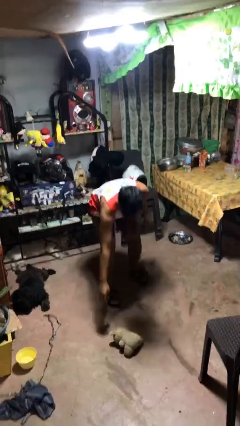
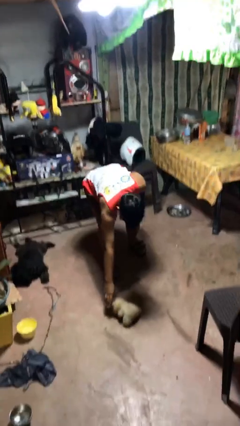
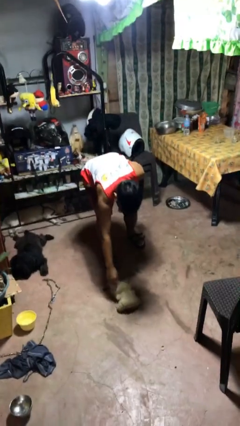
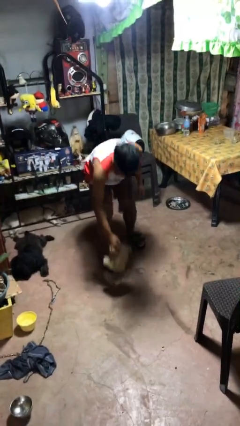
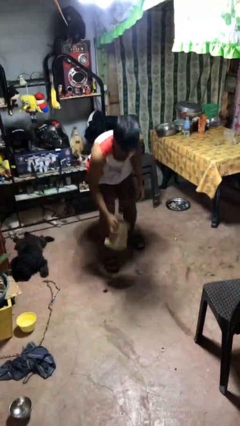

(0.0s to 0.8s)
person picks up object from floor

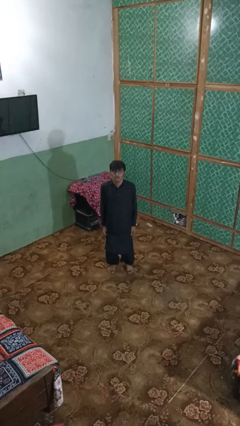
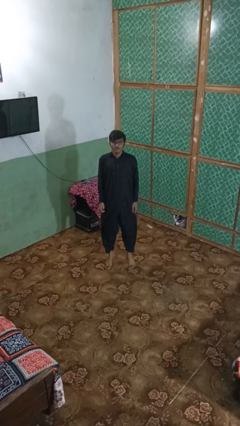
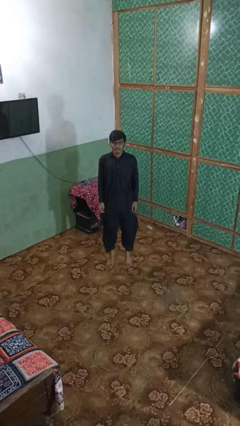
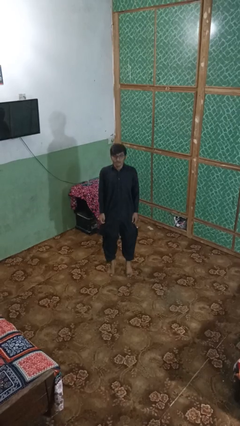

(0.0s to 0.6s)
person jumps

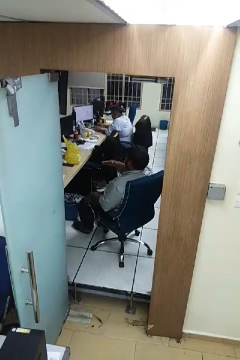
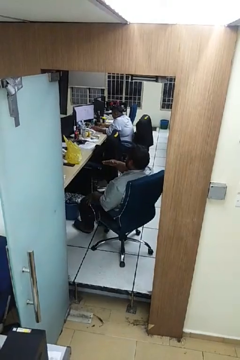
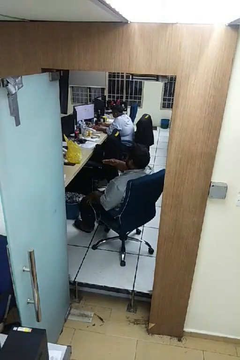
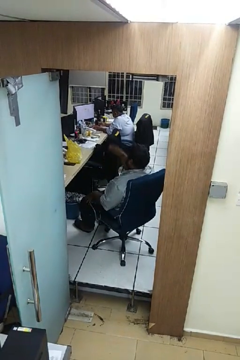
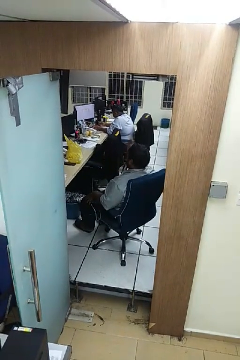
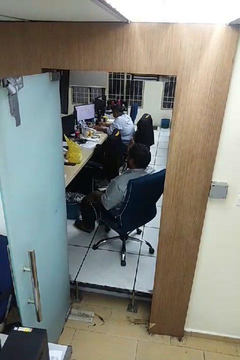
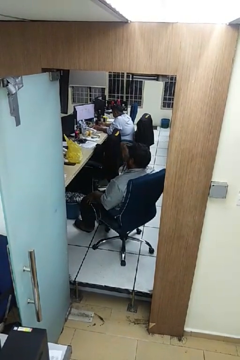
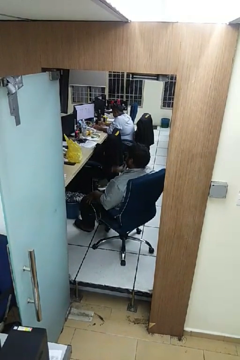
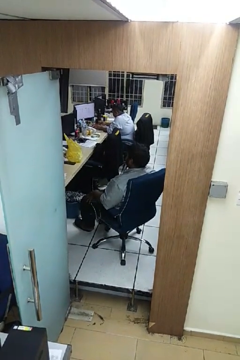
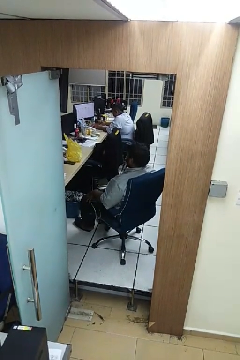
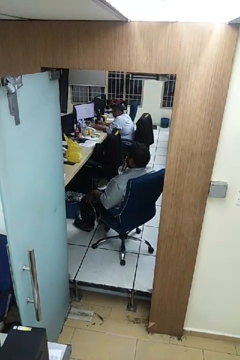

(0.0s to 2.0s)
person gestures swipe right

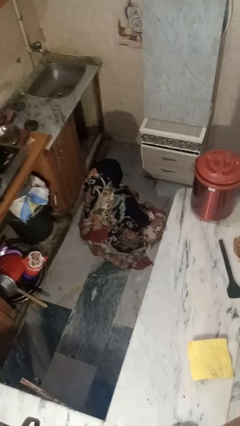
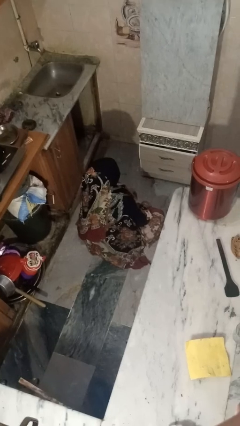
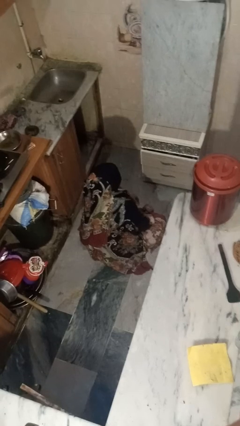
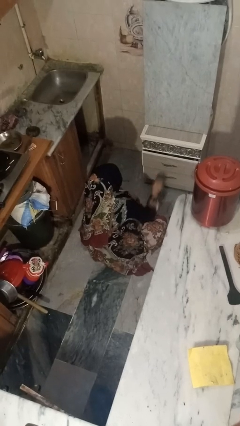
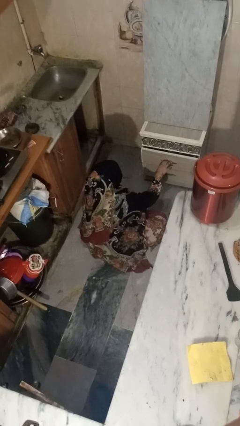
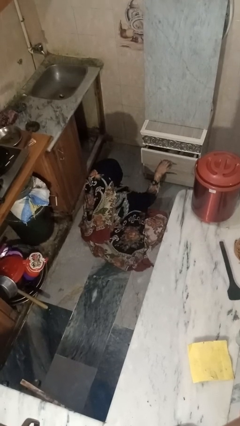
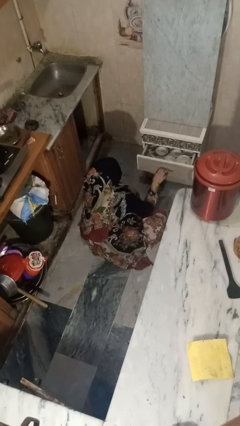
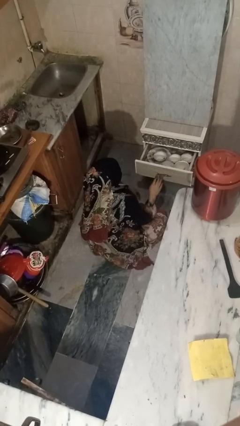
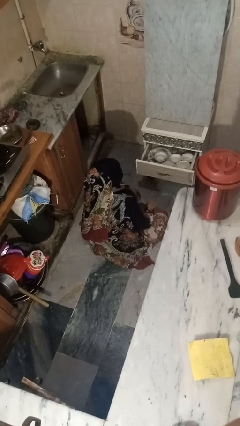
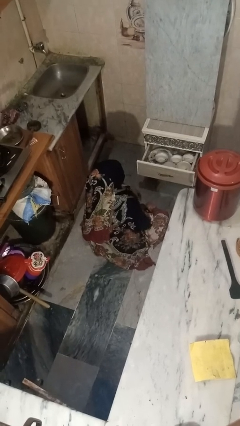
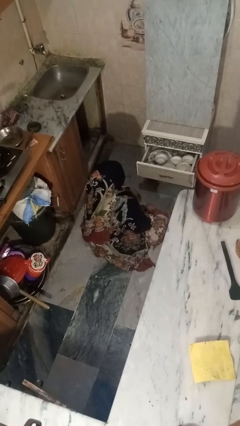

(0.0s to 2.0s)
person opens kitchen drawer

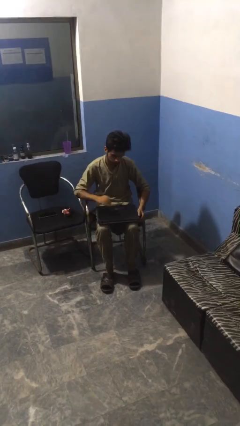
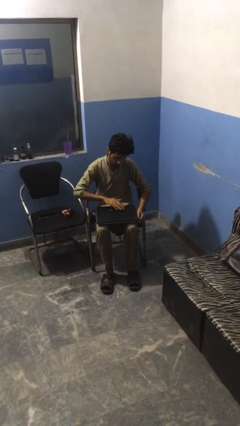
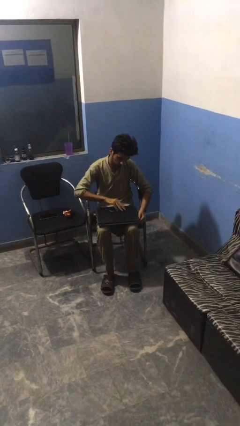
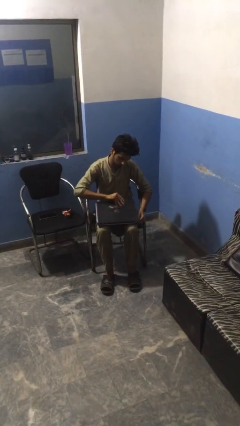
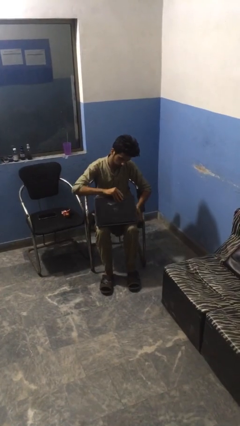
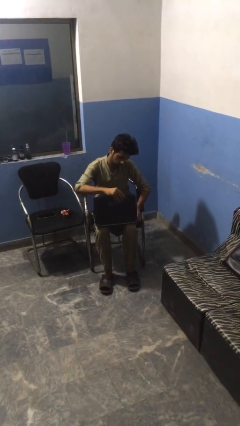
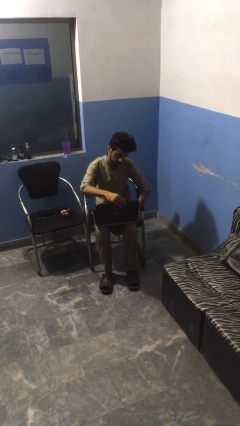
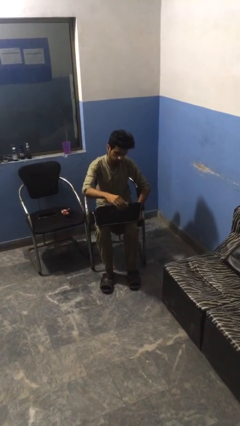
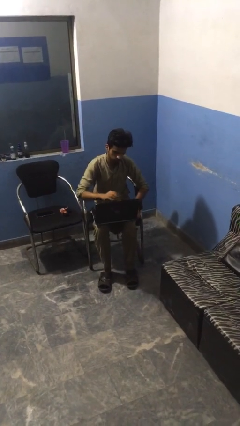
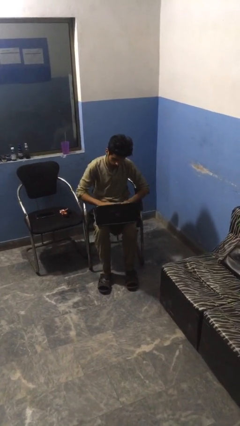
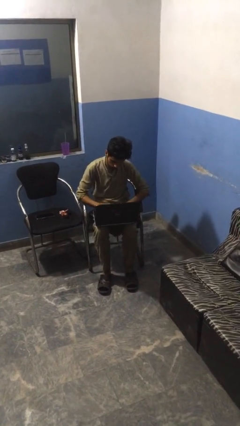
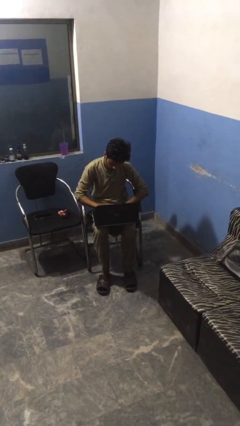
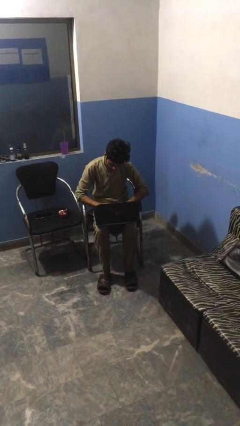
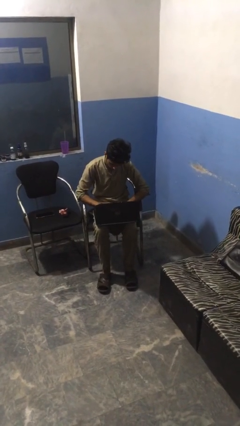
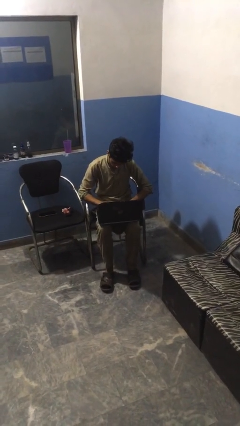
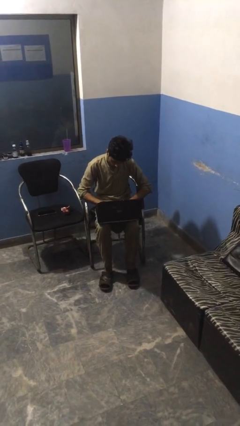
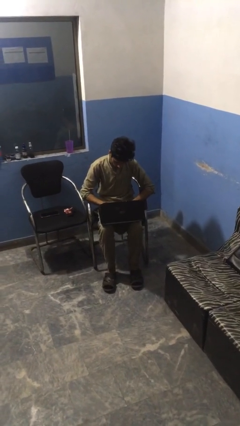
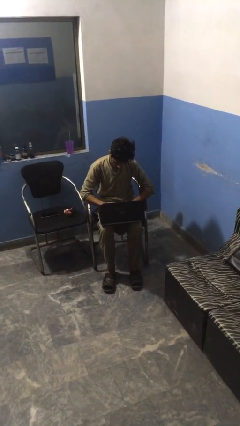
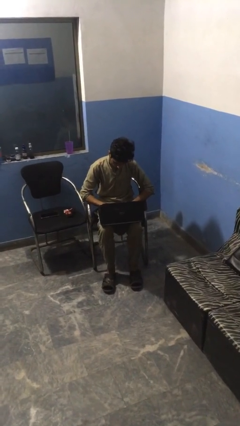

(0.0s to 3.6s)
person opens laptop

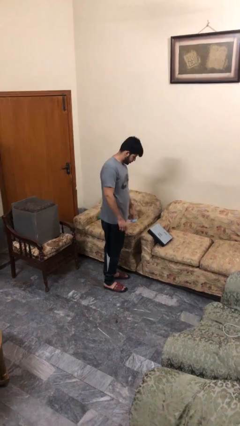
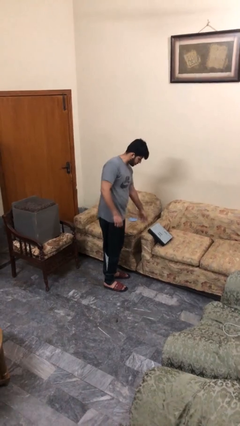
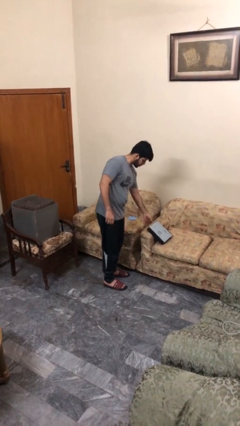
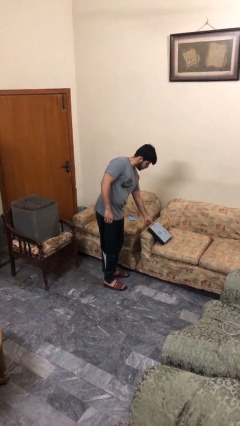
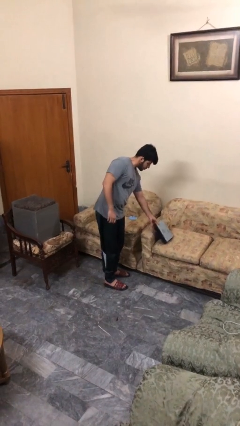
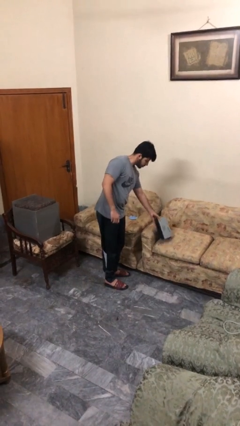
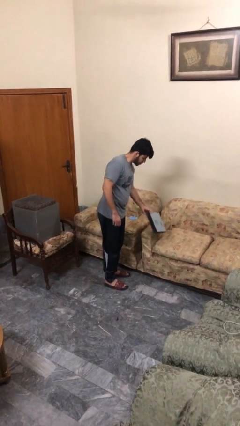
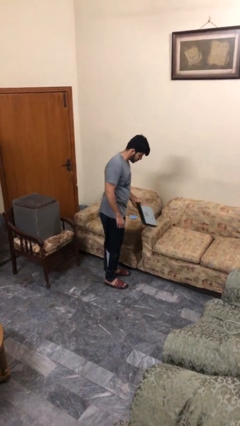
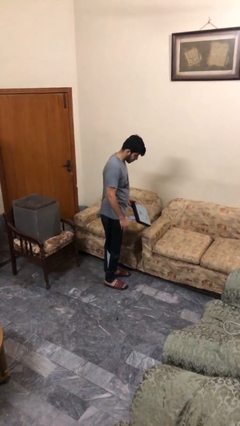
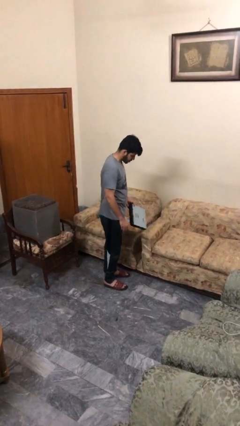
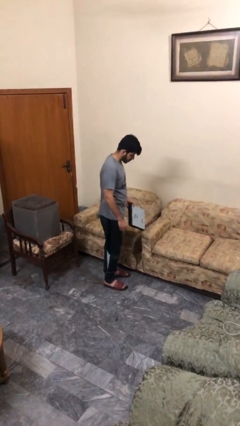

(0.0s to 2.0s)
person picks up object from couch

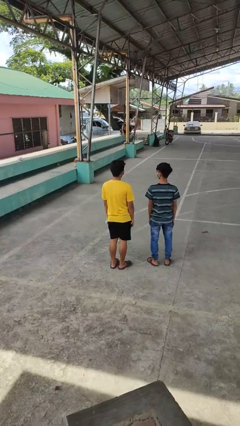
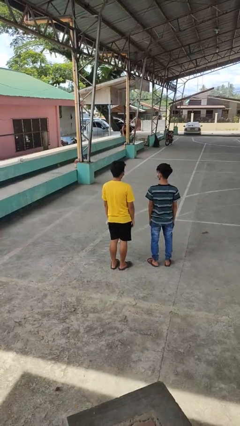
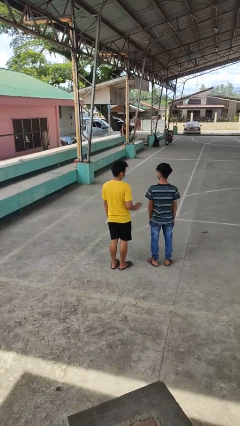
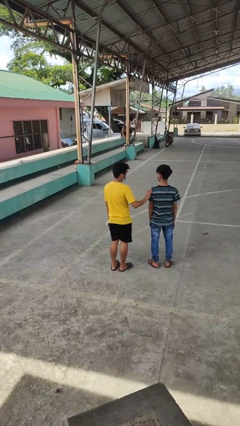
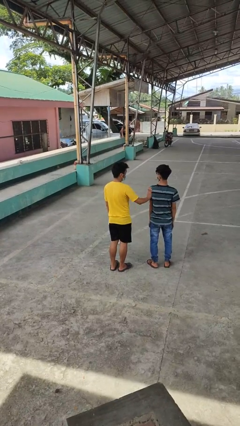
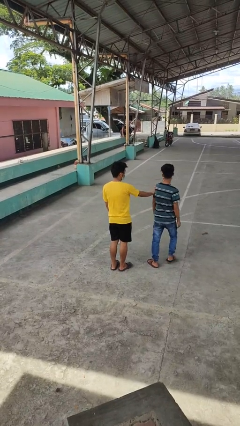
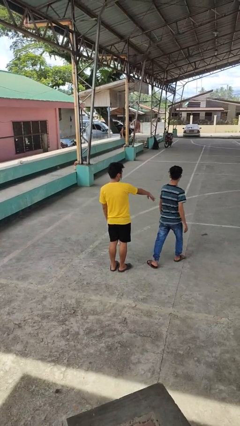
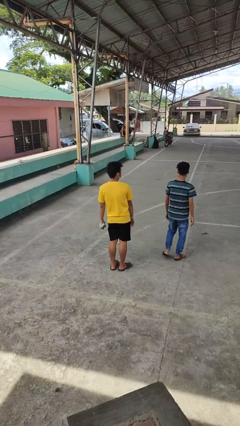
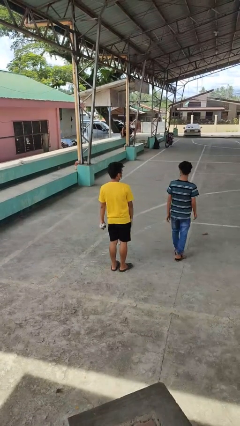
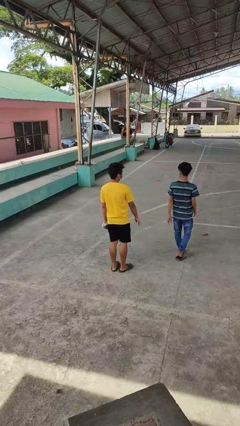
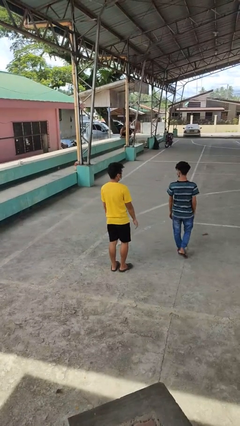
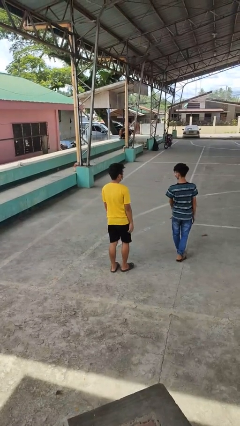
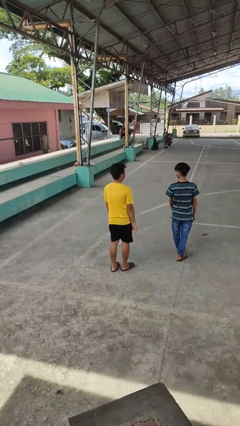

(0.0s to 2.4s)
person shoves person

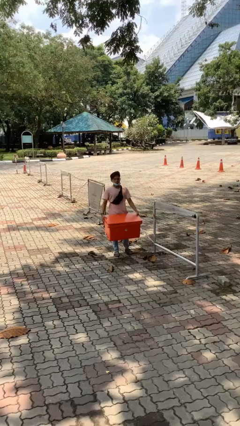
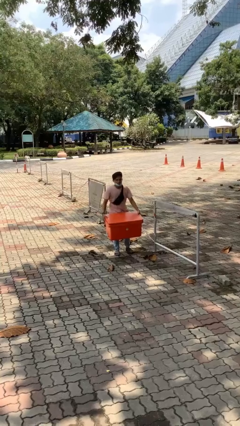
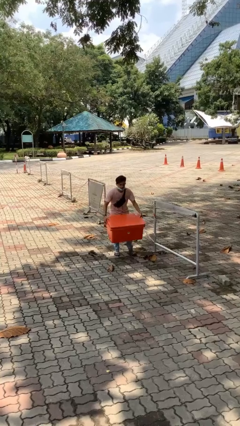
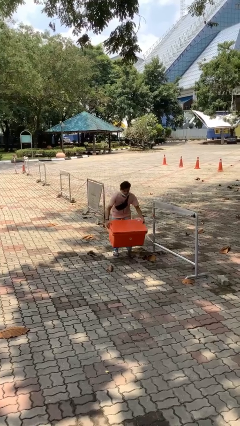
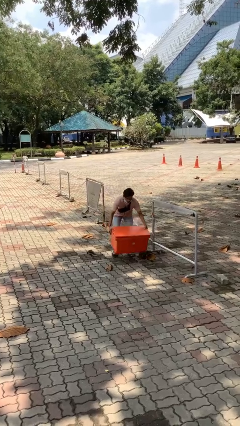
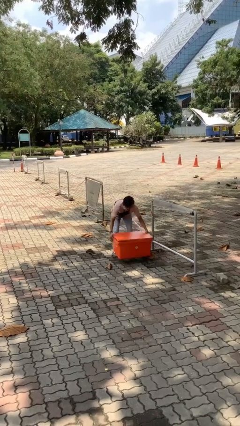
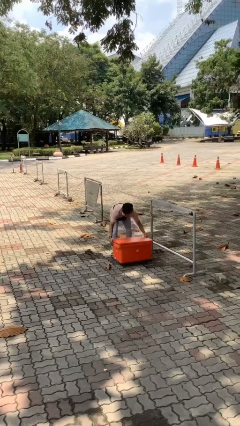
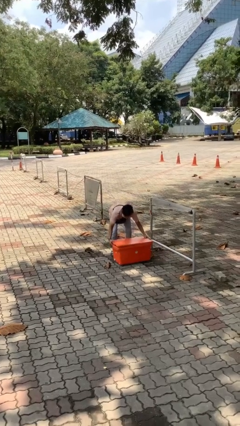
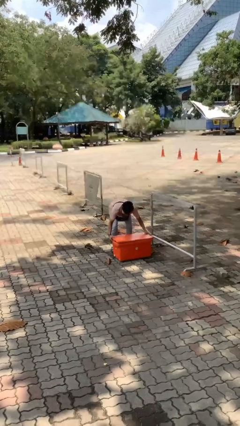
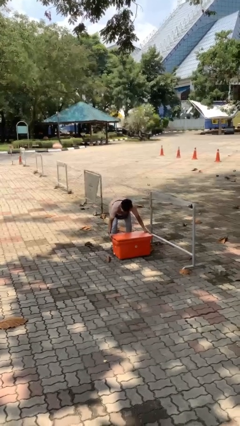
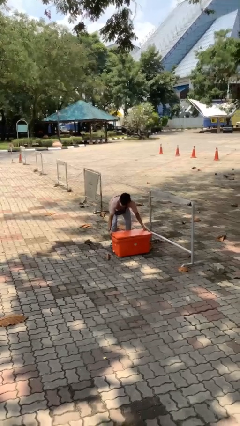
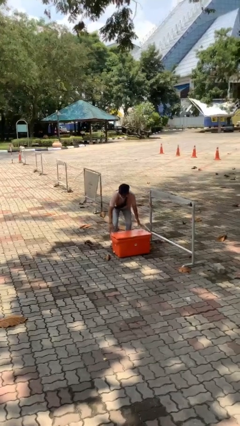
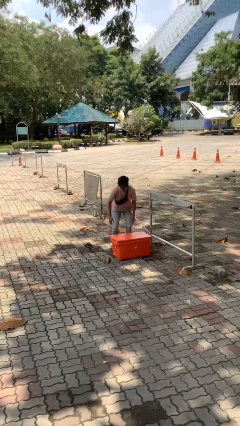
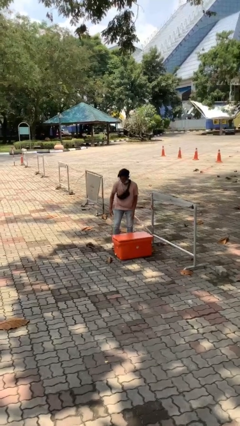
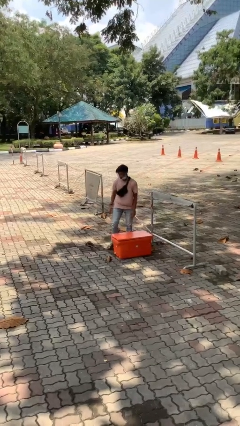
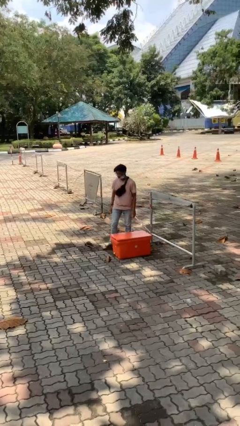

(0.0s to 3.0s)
person puts down object on floor
